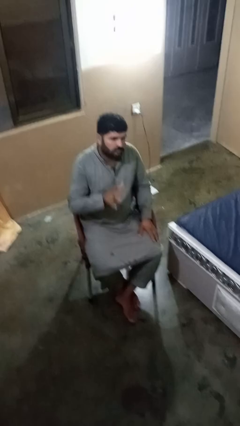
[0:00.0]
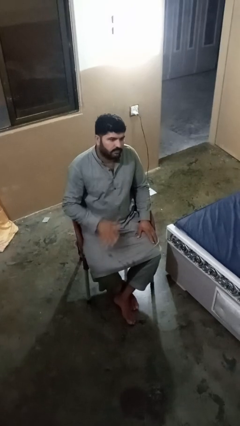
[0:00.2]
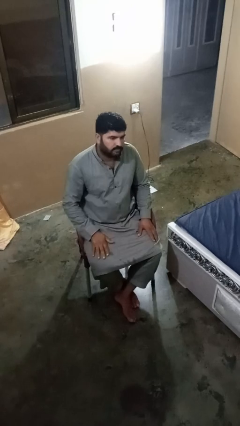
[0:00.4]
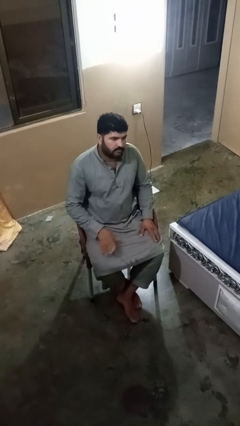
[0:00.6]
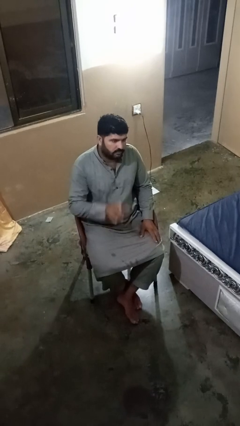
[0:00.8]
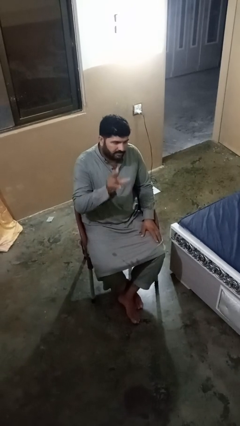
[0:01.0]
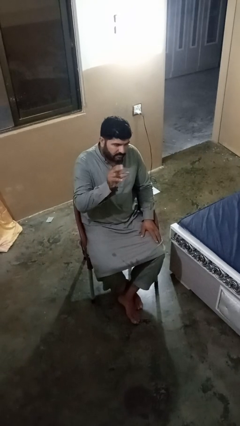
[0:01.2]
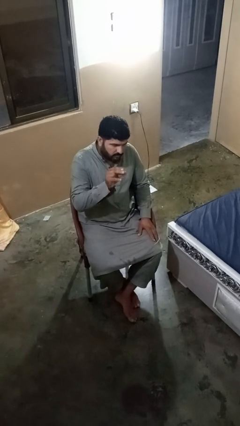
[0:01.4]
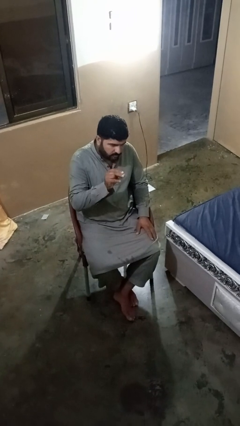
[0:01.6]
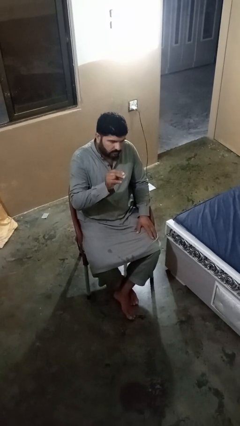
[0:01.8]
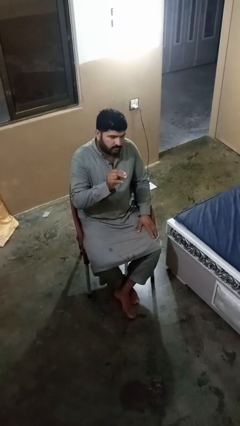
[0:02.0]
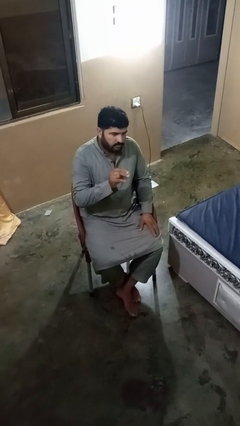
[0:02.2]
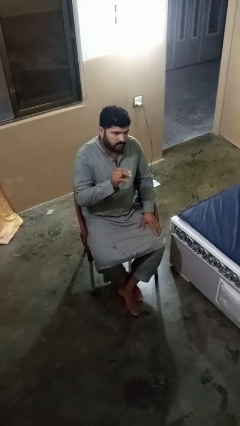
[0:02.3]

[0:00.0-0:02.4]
person gestures zoom in

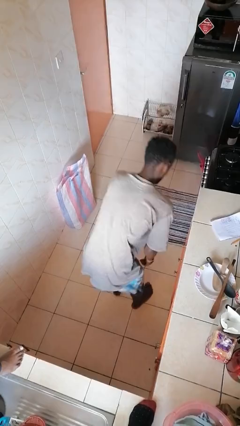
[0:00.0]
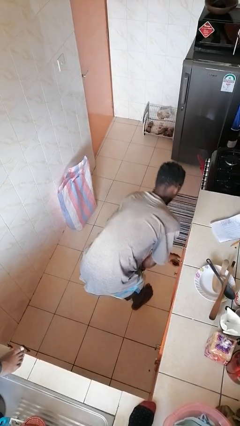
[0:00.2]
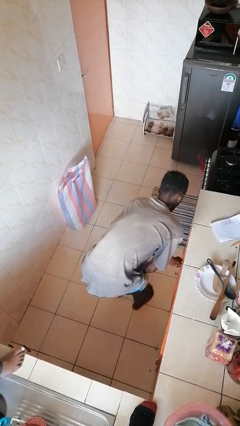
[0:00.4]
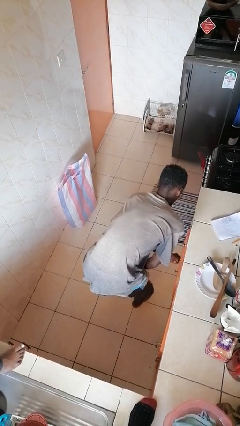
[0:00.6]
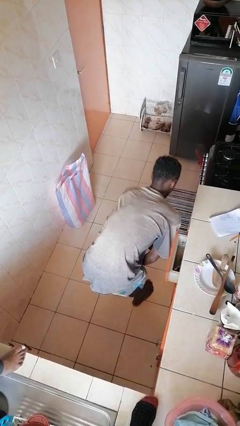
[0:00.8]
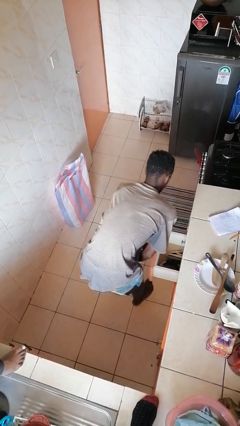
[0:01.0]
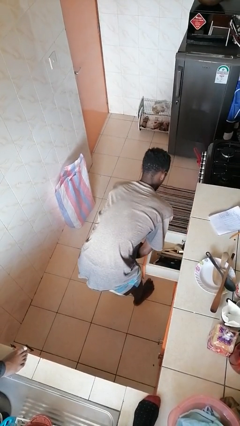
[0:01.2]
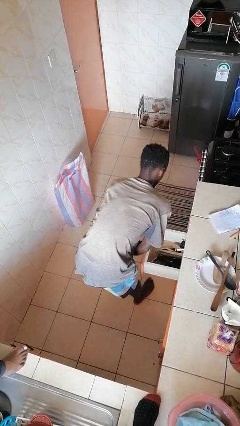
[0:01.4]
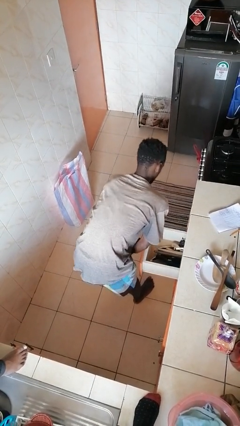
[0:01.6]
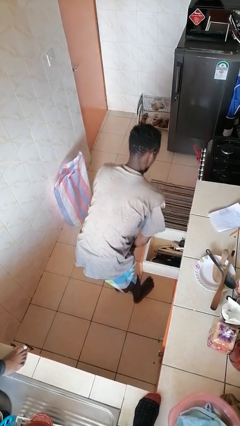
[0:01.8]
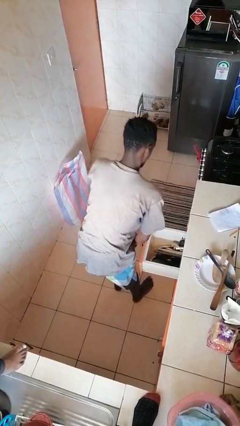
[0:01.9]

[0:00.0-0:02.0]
person opens kitchen drawer

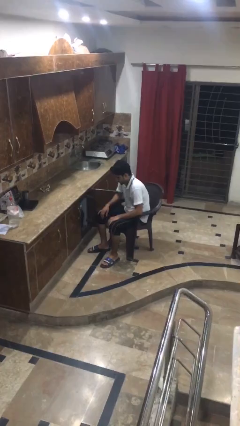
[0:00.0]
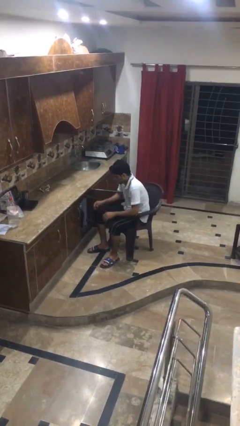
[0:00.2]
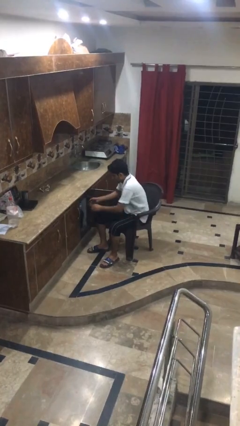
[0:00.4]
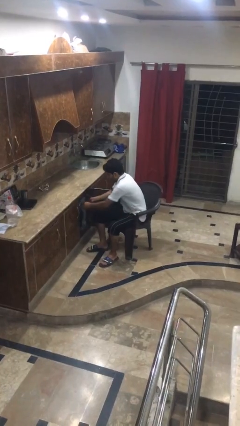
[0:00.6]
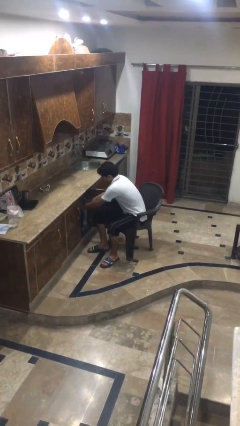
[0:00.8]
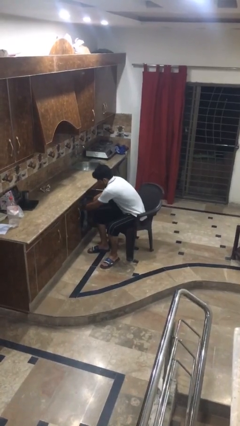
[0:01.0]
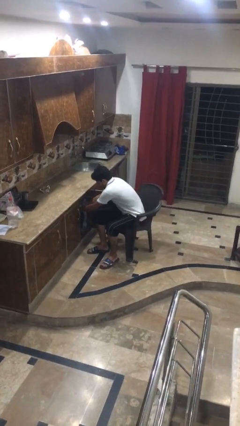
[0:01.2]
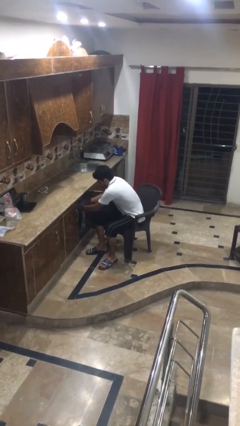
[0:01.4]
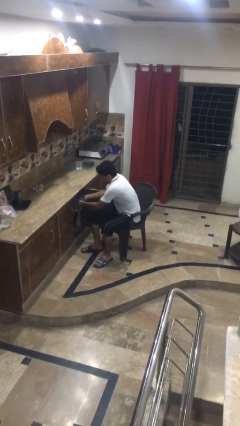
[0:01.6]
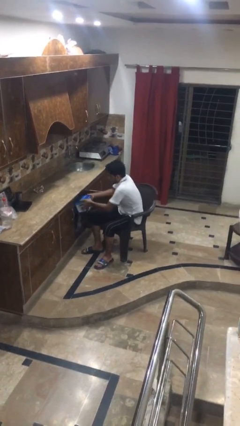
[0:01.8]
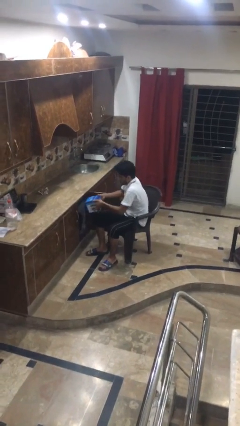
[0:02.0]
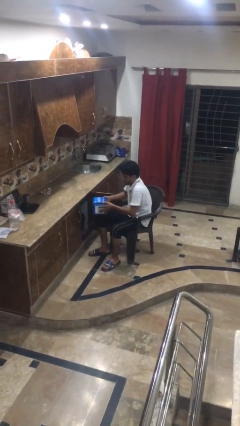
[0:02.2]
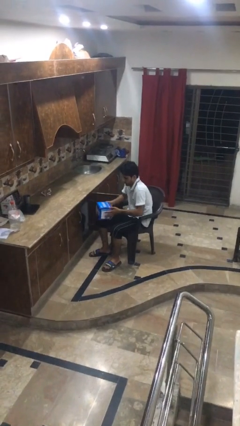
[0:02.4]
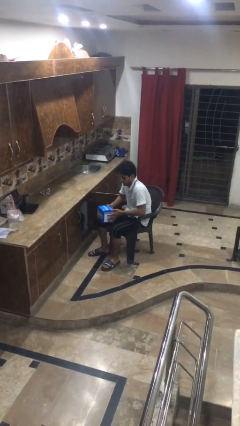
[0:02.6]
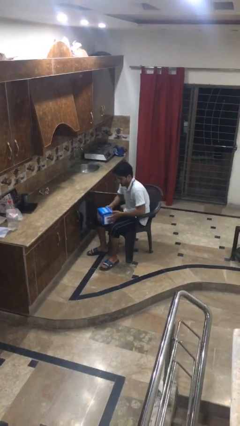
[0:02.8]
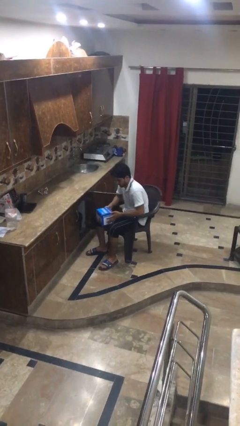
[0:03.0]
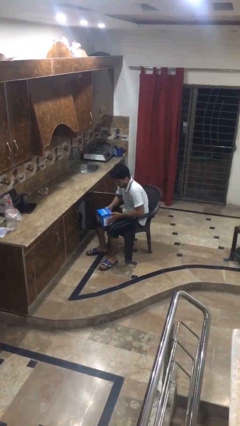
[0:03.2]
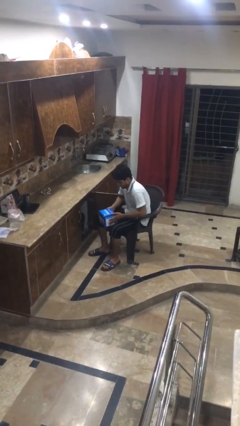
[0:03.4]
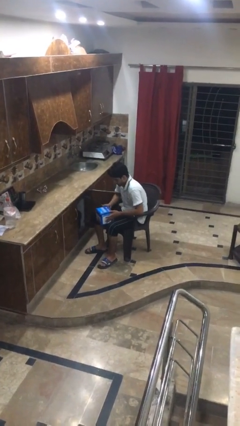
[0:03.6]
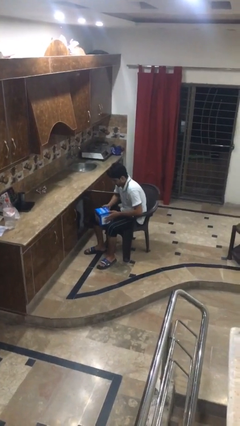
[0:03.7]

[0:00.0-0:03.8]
person picks up object from cabinet

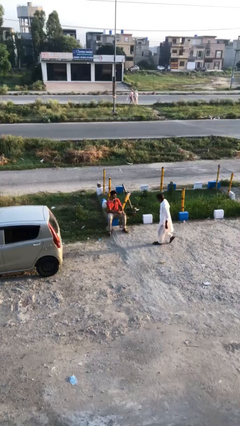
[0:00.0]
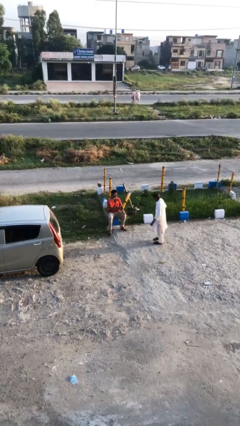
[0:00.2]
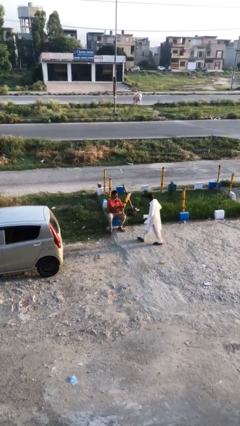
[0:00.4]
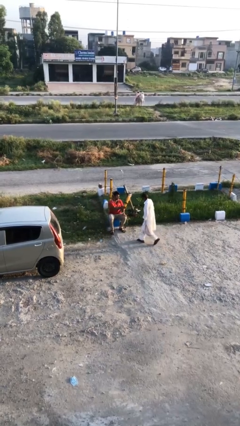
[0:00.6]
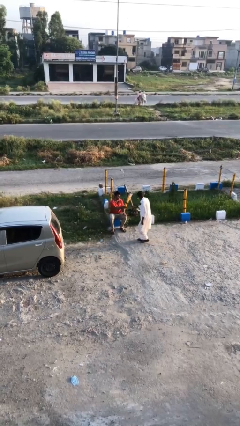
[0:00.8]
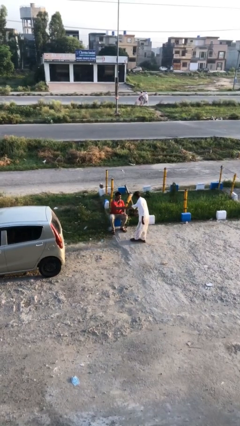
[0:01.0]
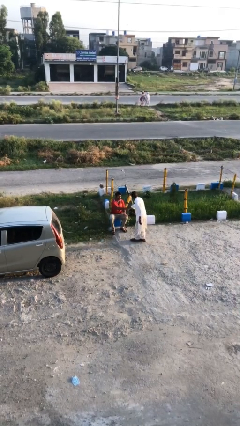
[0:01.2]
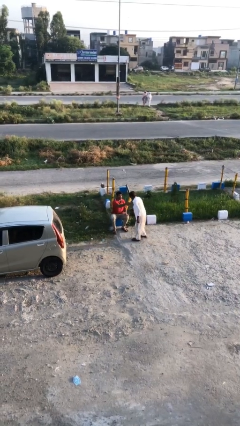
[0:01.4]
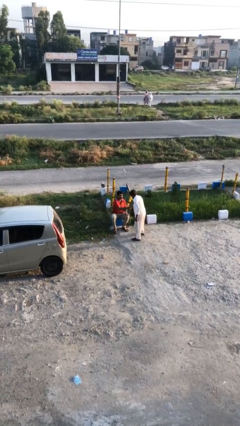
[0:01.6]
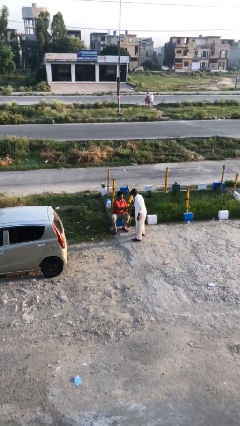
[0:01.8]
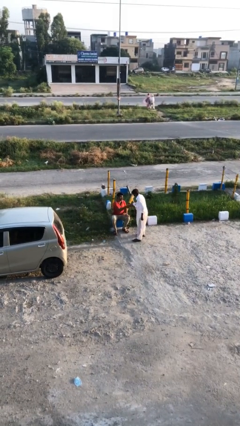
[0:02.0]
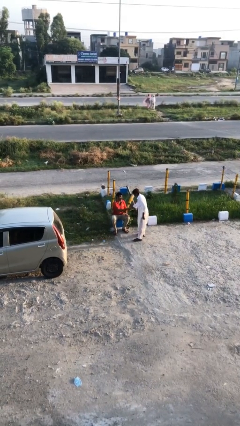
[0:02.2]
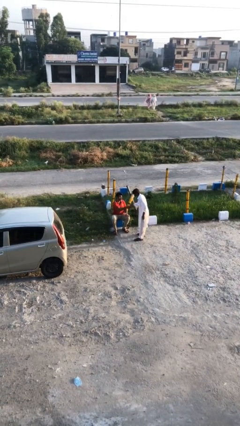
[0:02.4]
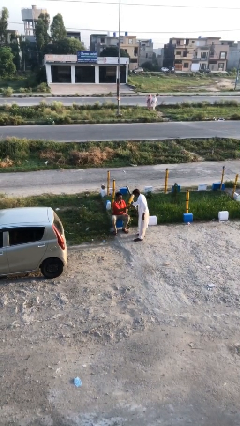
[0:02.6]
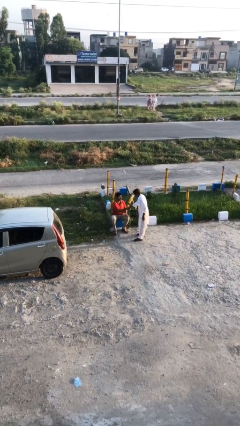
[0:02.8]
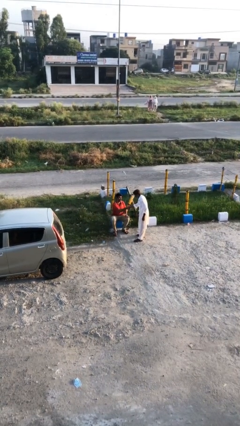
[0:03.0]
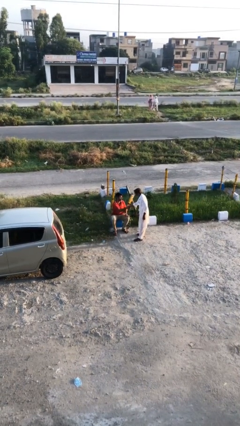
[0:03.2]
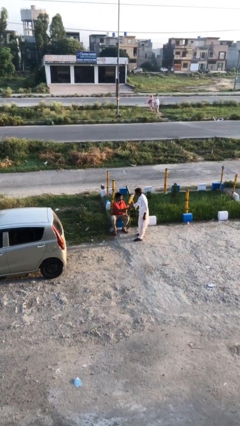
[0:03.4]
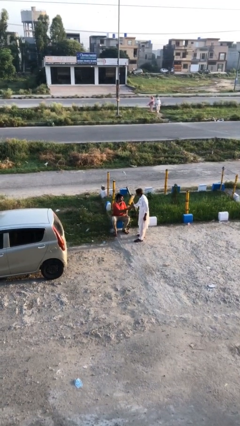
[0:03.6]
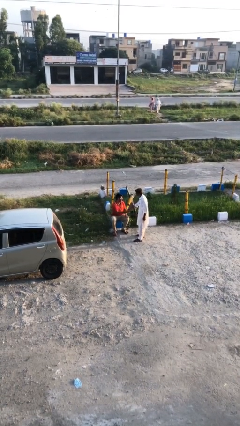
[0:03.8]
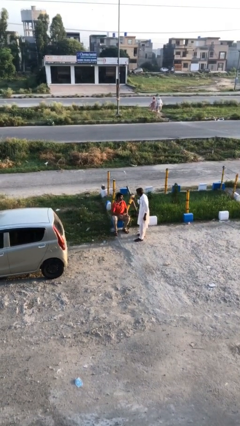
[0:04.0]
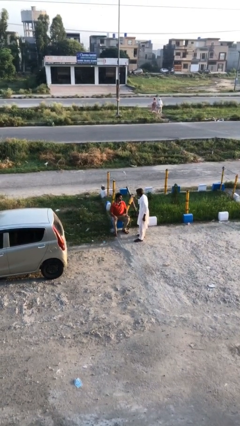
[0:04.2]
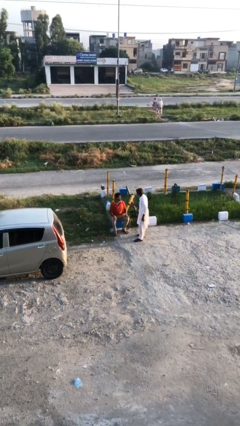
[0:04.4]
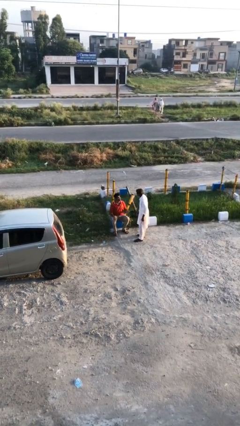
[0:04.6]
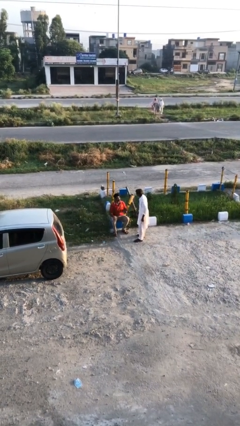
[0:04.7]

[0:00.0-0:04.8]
person shakes hand

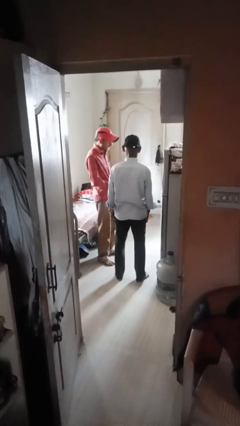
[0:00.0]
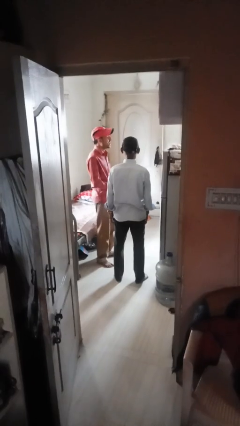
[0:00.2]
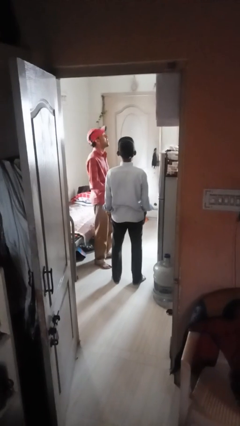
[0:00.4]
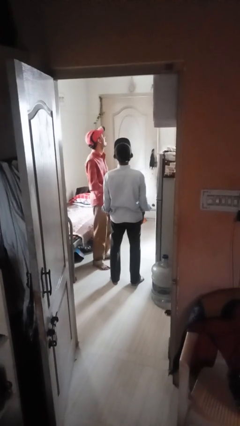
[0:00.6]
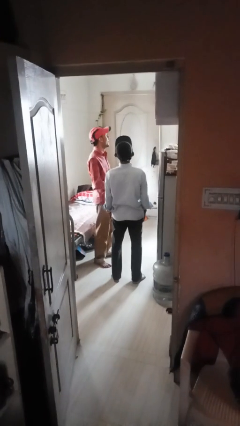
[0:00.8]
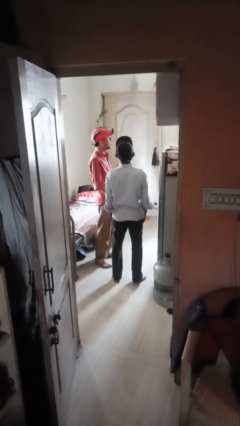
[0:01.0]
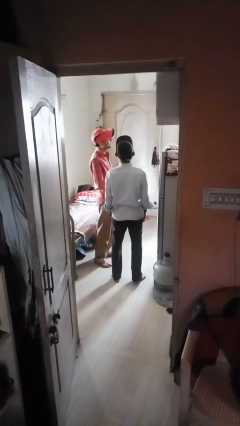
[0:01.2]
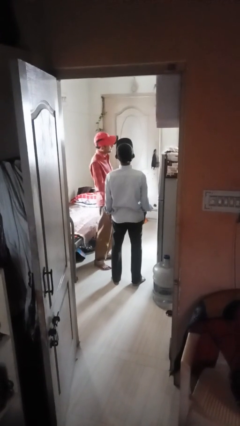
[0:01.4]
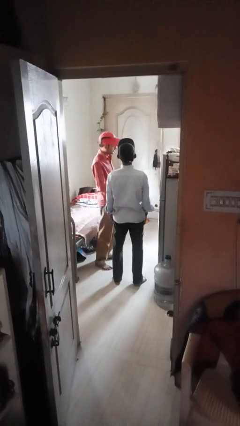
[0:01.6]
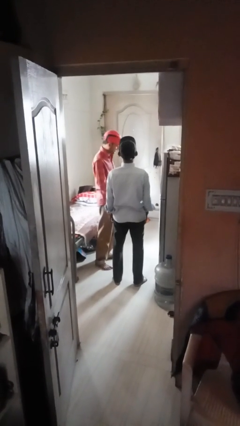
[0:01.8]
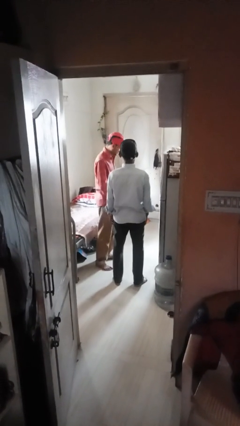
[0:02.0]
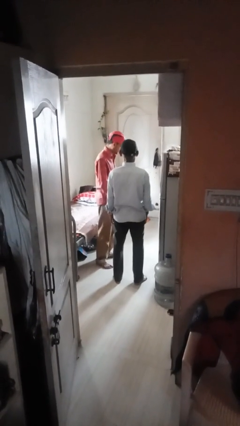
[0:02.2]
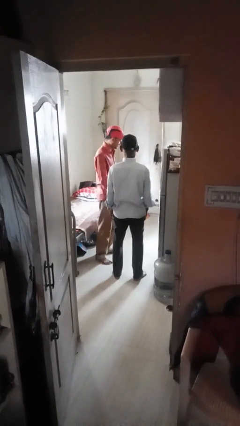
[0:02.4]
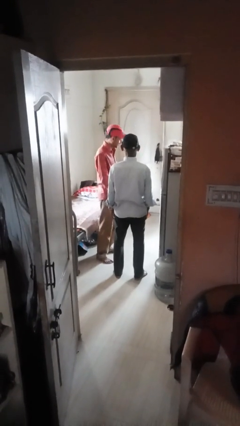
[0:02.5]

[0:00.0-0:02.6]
person laughs with person

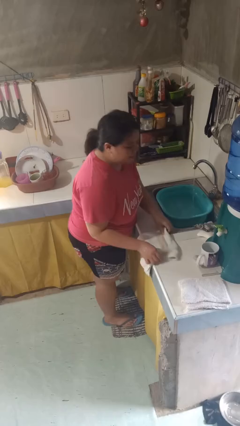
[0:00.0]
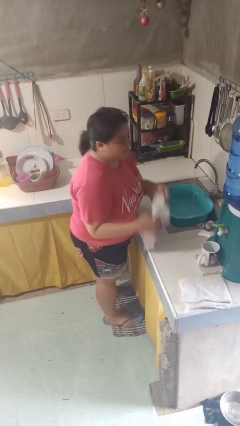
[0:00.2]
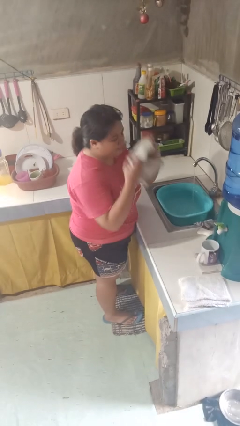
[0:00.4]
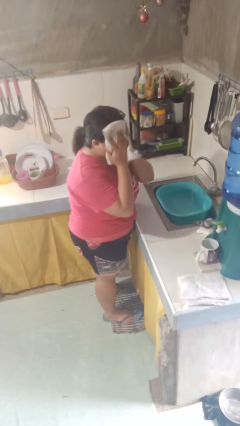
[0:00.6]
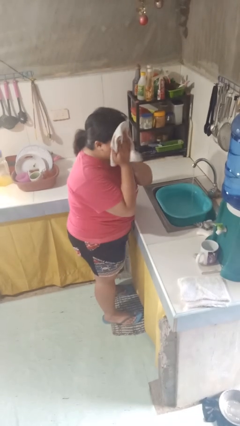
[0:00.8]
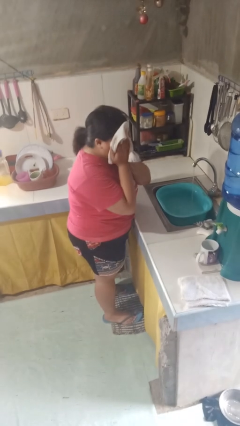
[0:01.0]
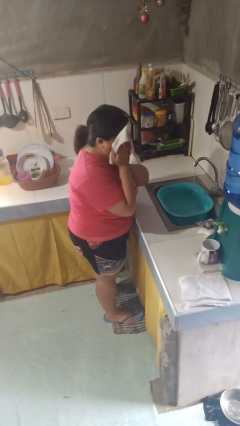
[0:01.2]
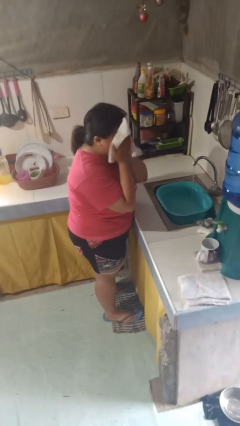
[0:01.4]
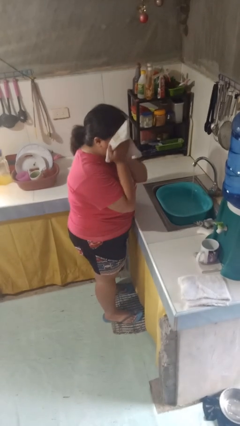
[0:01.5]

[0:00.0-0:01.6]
person dries face with towel

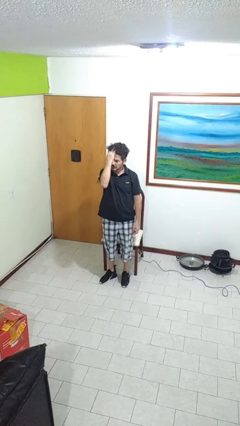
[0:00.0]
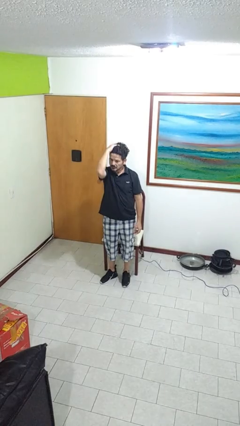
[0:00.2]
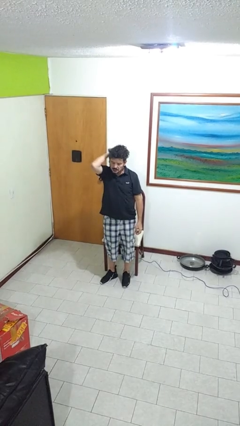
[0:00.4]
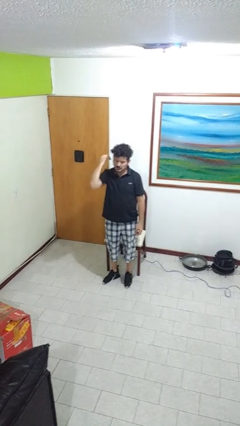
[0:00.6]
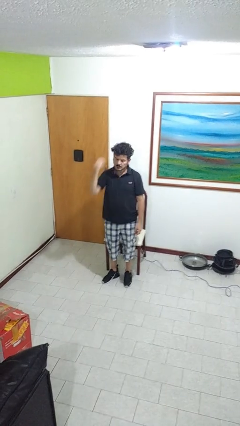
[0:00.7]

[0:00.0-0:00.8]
person strokes hair
